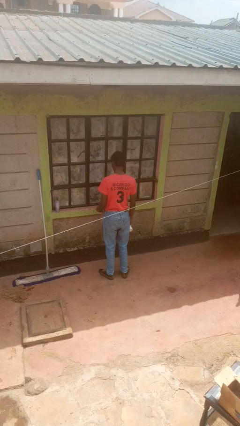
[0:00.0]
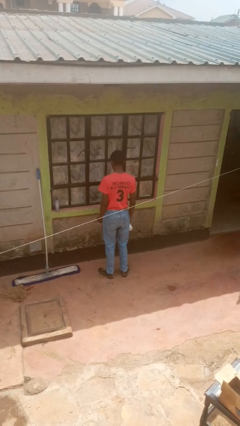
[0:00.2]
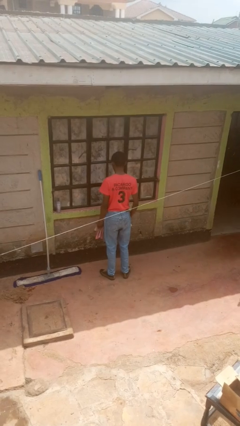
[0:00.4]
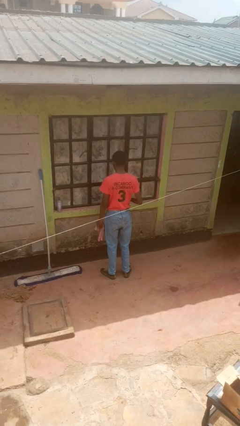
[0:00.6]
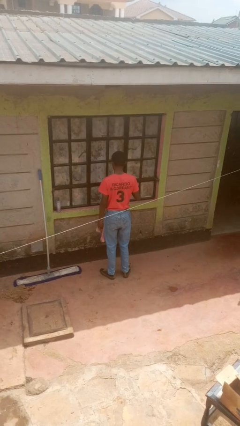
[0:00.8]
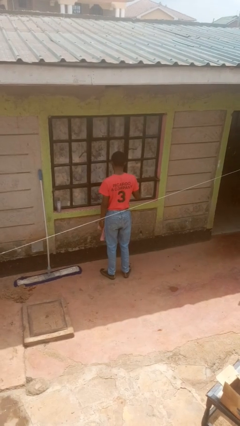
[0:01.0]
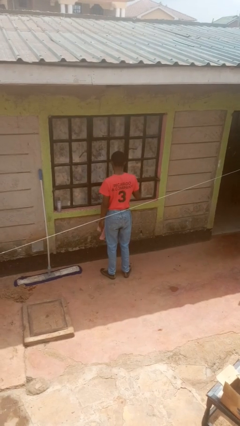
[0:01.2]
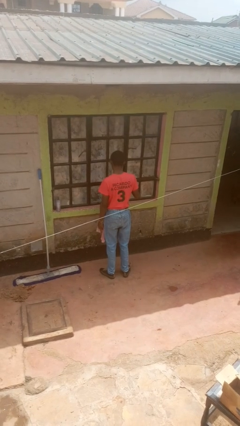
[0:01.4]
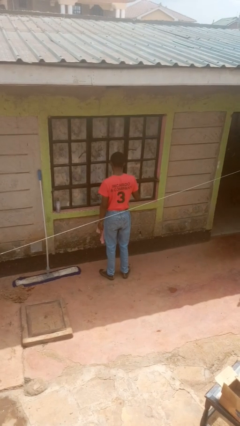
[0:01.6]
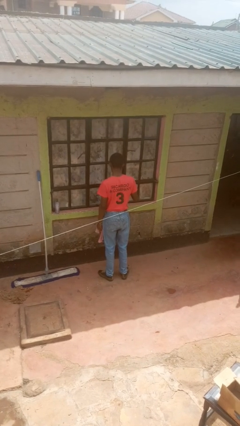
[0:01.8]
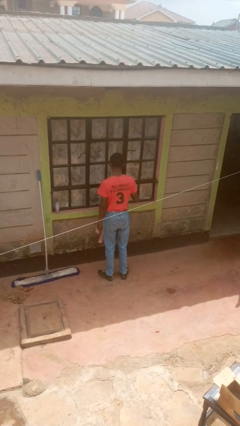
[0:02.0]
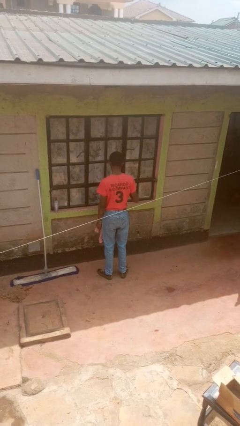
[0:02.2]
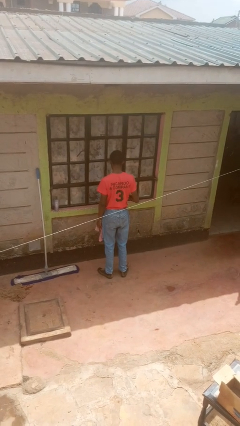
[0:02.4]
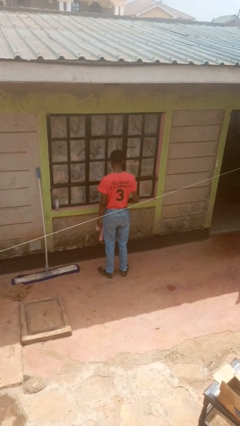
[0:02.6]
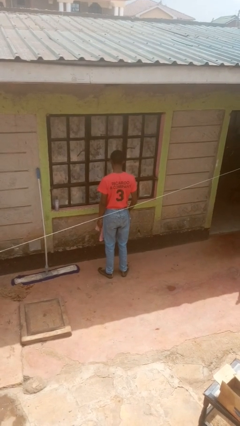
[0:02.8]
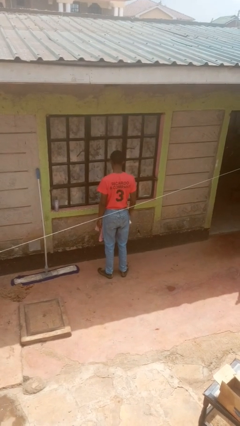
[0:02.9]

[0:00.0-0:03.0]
person sprays from bottle

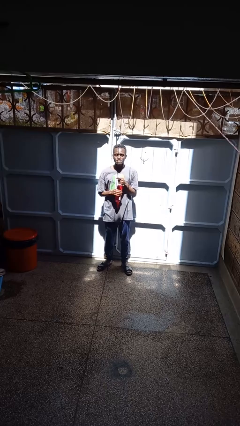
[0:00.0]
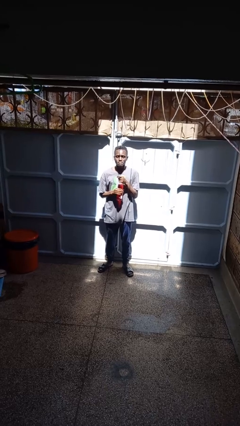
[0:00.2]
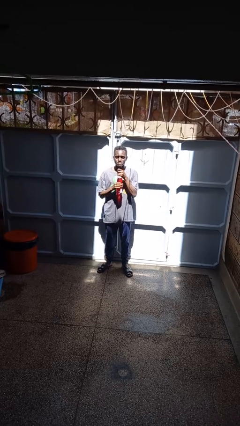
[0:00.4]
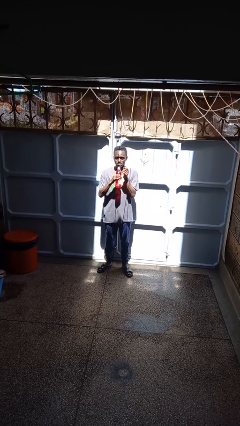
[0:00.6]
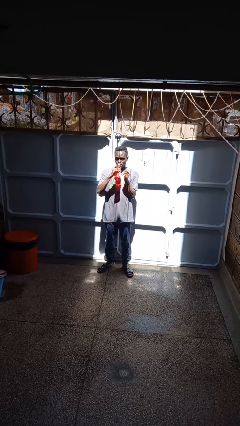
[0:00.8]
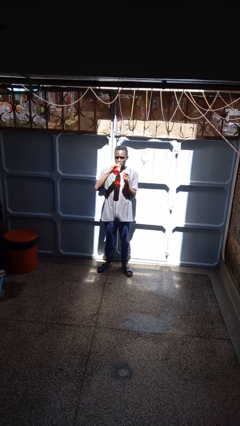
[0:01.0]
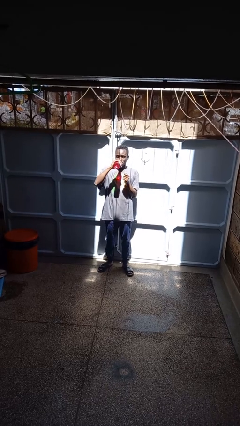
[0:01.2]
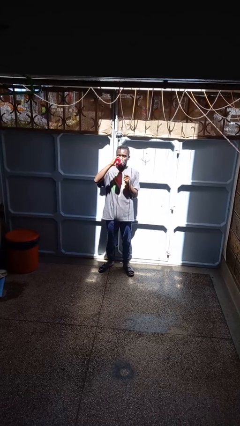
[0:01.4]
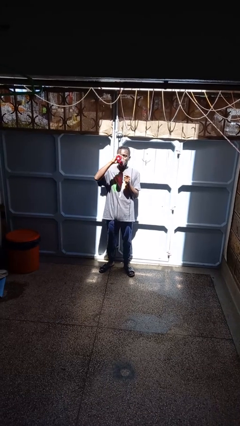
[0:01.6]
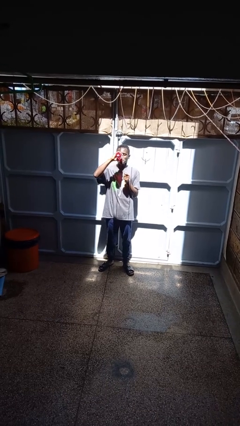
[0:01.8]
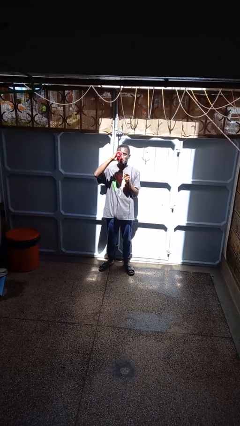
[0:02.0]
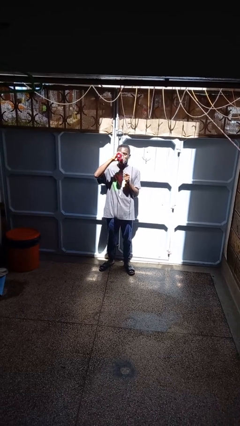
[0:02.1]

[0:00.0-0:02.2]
person drinks from beverage can

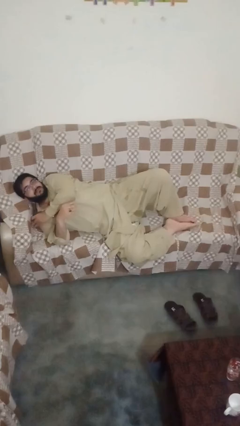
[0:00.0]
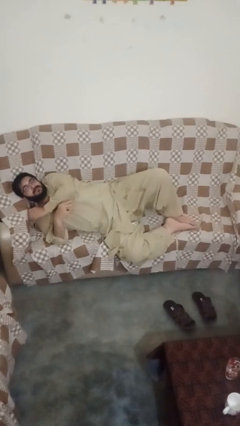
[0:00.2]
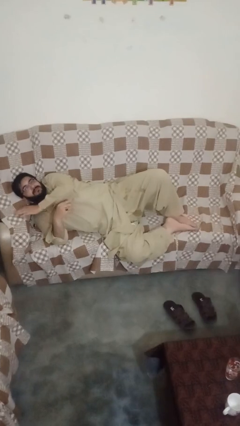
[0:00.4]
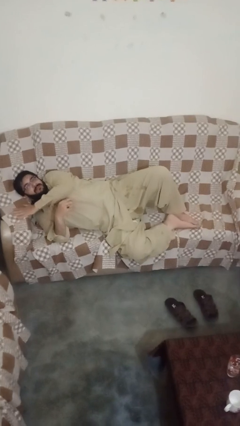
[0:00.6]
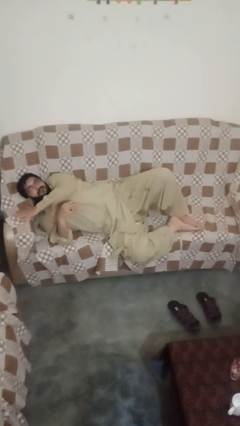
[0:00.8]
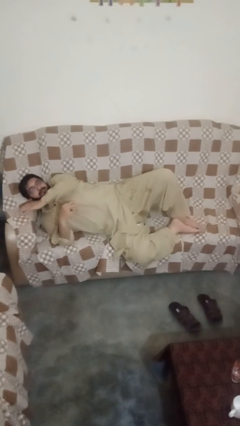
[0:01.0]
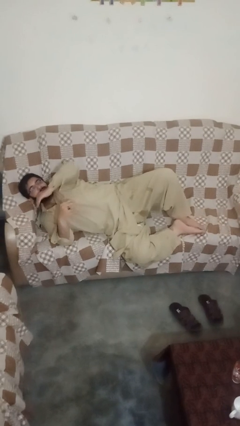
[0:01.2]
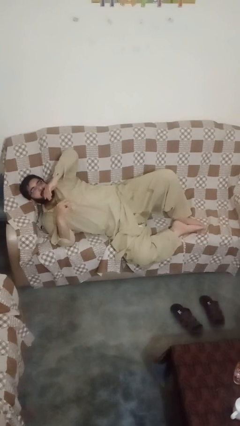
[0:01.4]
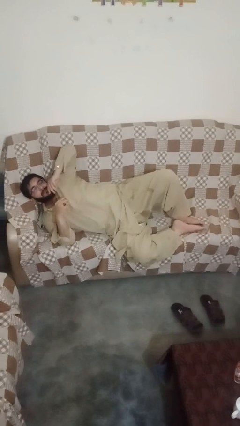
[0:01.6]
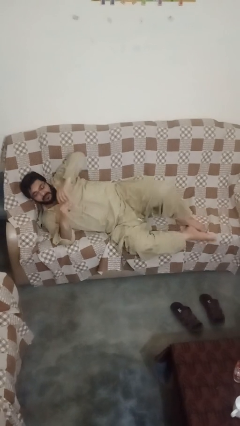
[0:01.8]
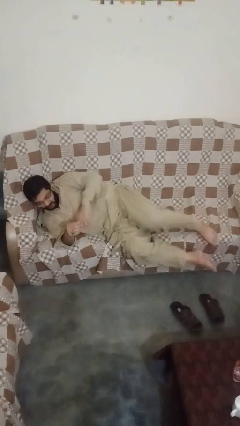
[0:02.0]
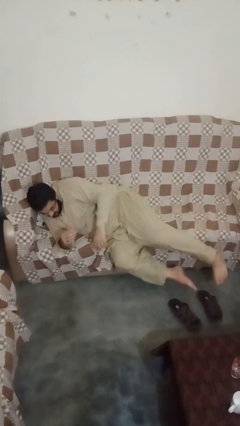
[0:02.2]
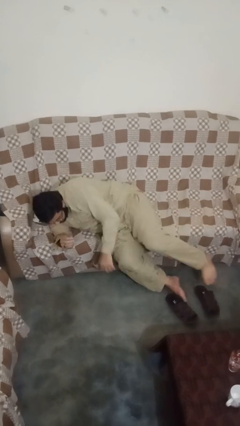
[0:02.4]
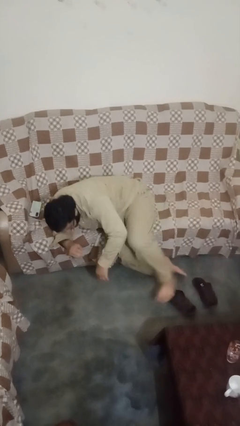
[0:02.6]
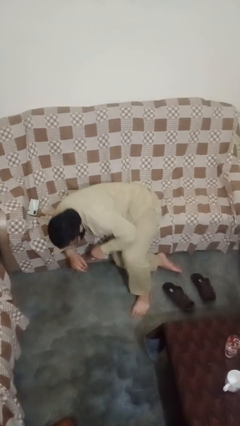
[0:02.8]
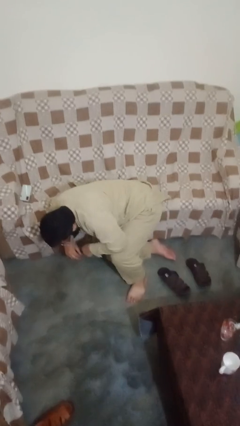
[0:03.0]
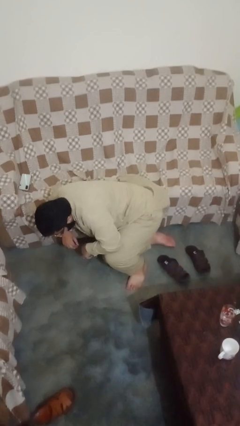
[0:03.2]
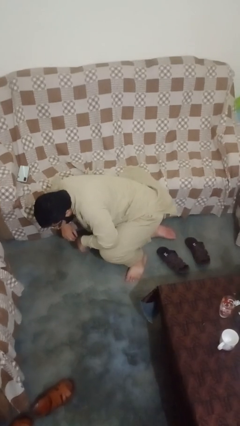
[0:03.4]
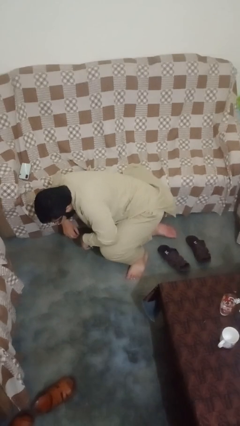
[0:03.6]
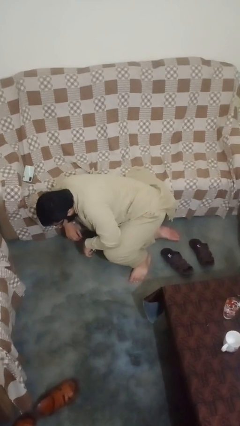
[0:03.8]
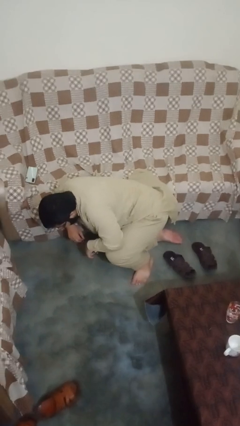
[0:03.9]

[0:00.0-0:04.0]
person falls from bed

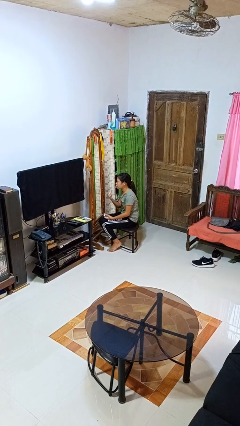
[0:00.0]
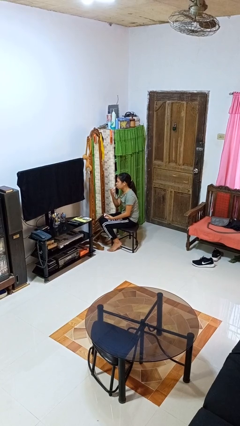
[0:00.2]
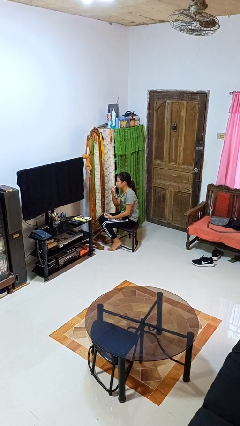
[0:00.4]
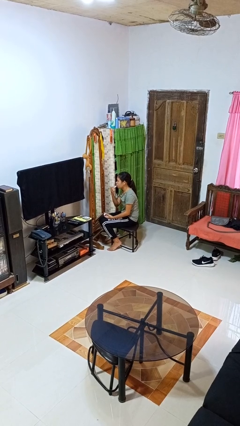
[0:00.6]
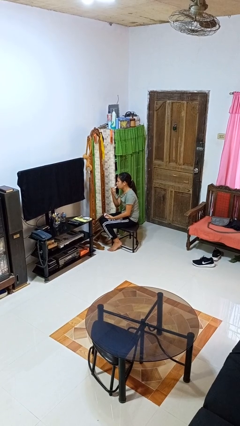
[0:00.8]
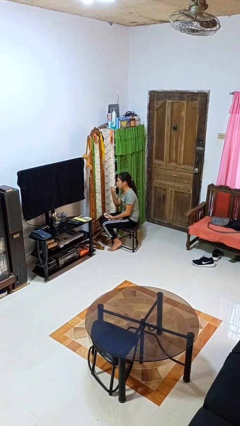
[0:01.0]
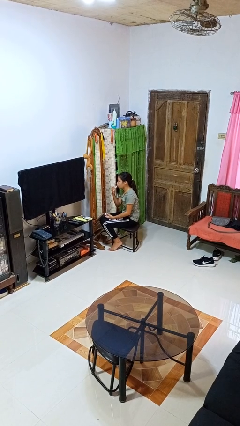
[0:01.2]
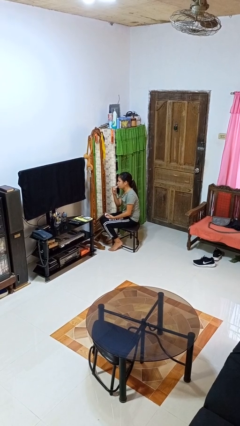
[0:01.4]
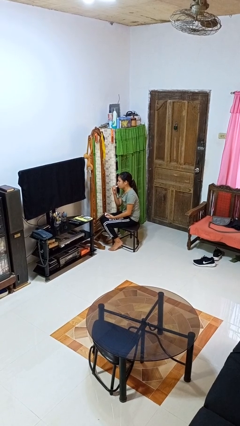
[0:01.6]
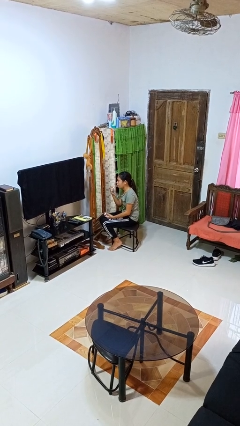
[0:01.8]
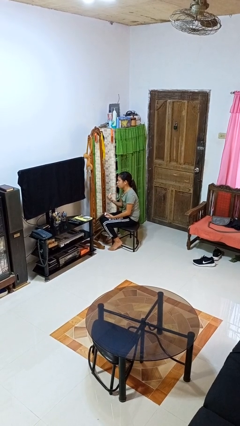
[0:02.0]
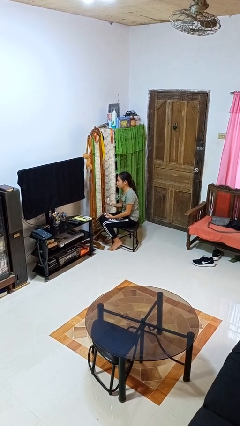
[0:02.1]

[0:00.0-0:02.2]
person applies lip makeup

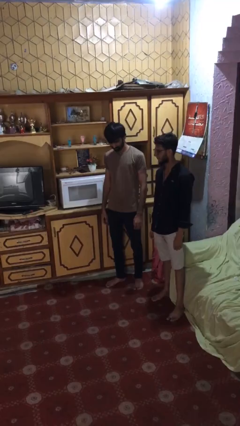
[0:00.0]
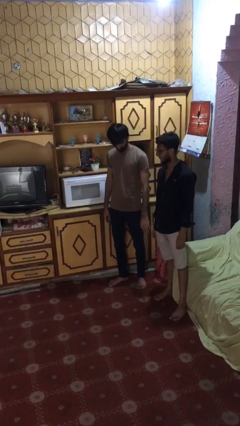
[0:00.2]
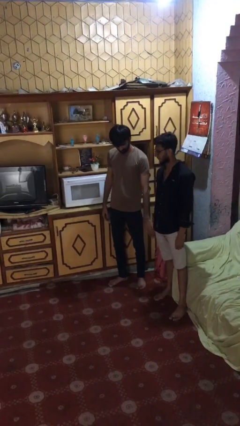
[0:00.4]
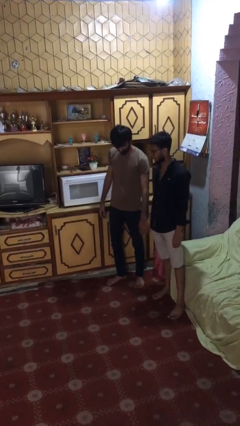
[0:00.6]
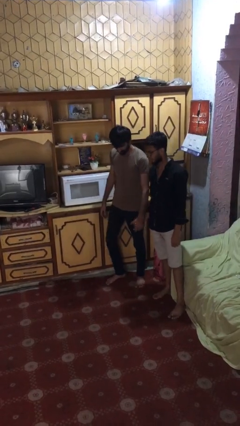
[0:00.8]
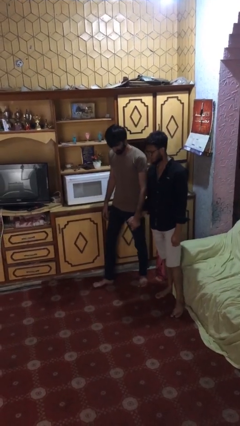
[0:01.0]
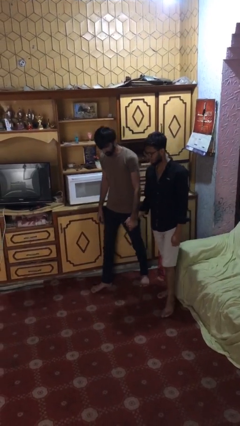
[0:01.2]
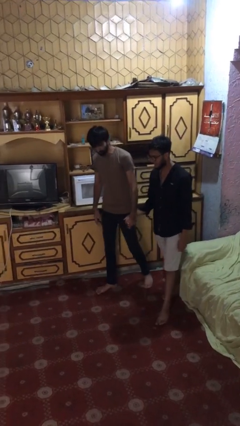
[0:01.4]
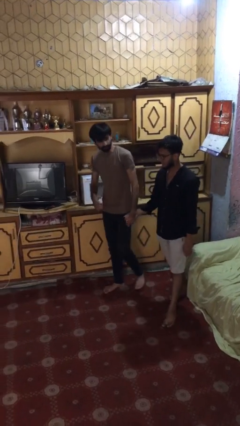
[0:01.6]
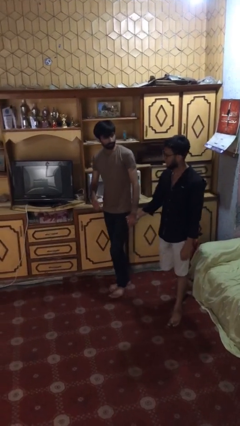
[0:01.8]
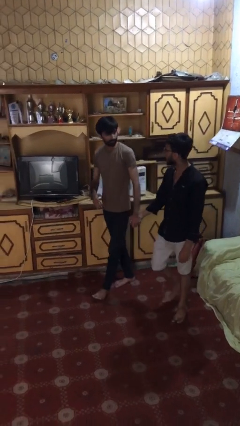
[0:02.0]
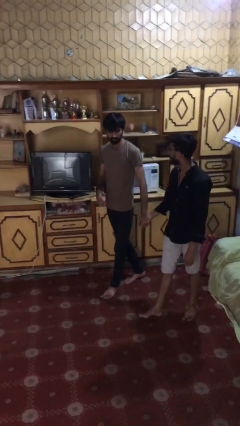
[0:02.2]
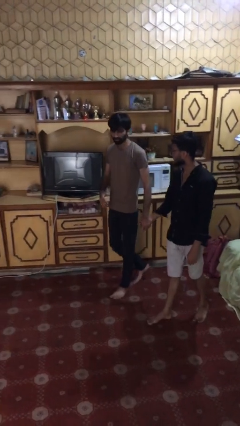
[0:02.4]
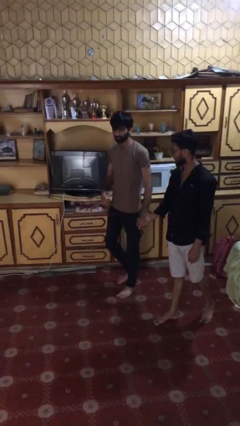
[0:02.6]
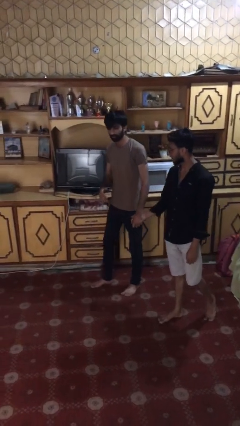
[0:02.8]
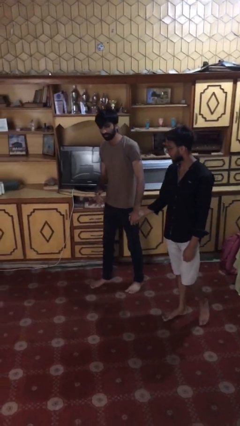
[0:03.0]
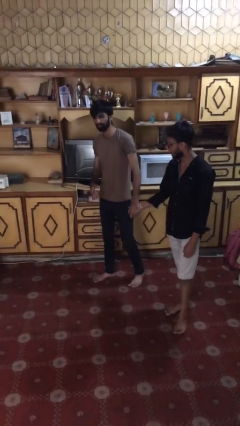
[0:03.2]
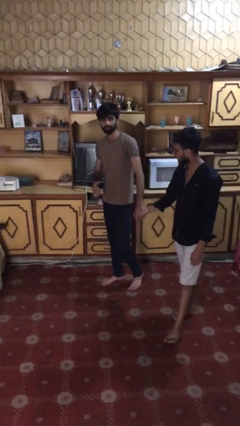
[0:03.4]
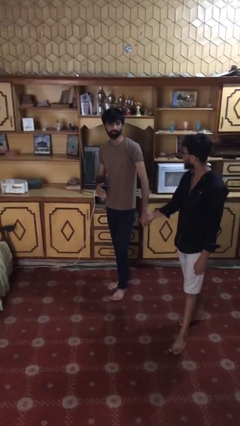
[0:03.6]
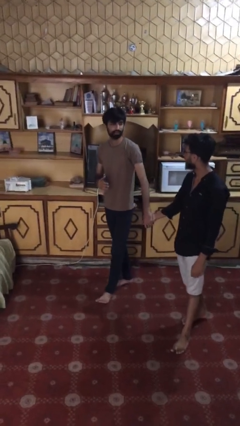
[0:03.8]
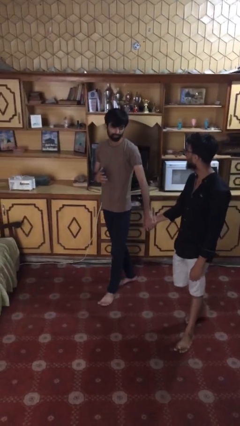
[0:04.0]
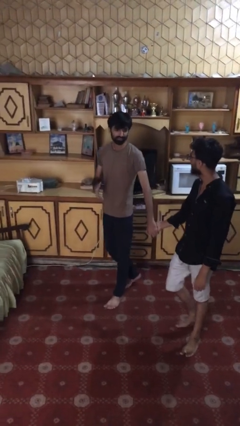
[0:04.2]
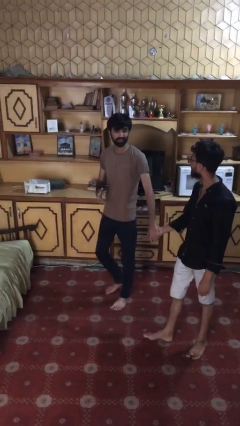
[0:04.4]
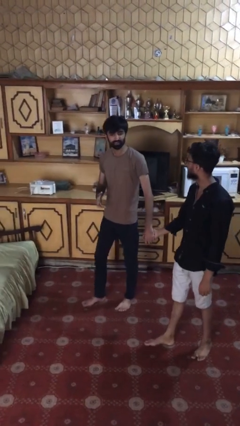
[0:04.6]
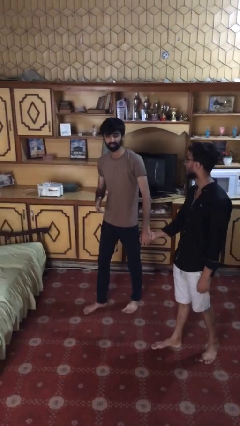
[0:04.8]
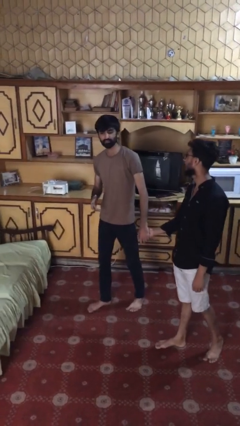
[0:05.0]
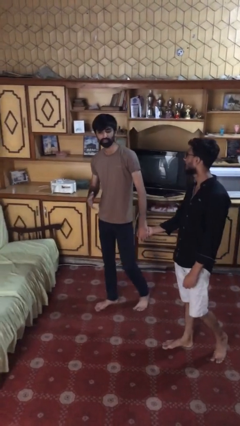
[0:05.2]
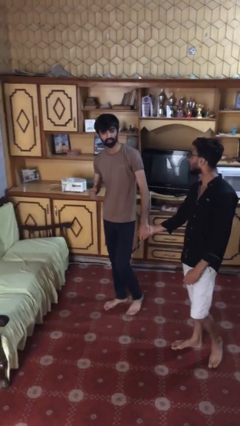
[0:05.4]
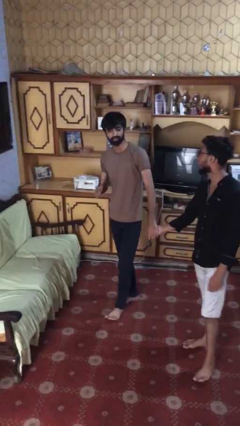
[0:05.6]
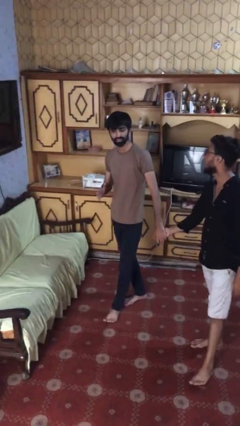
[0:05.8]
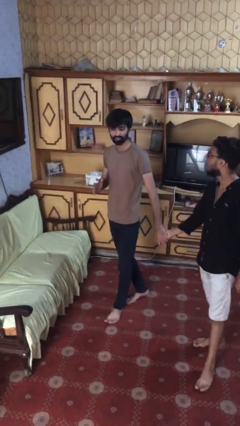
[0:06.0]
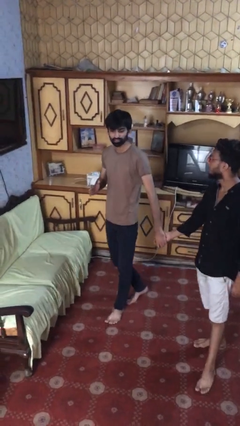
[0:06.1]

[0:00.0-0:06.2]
person holds hand

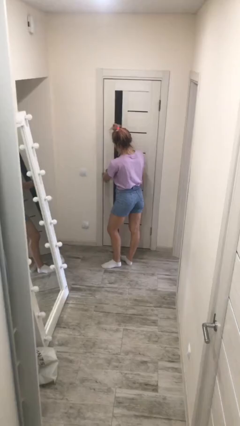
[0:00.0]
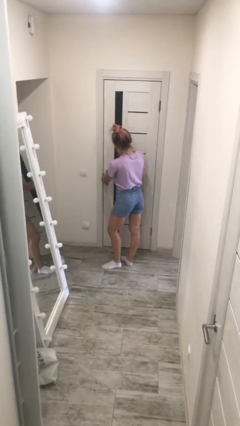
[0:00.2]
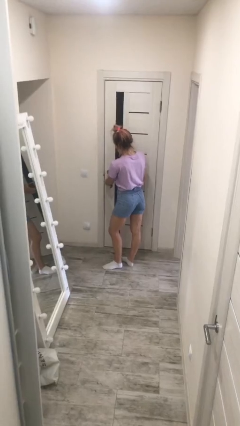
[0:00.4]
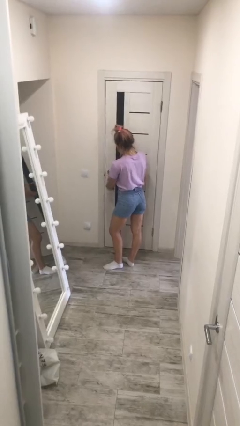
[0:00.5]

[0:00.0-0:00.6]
person locks door with keys
